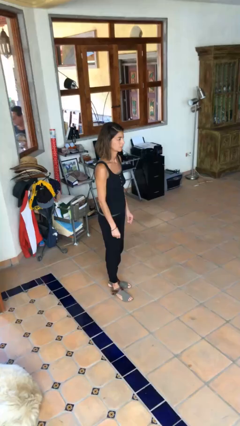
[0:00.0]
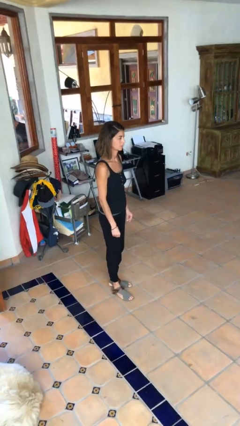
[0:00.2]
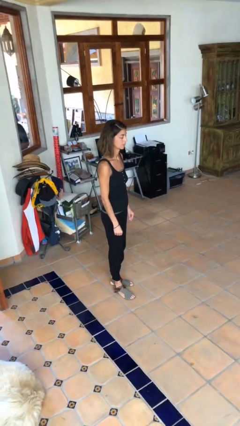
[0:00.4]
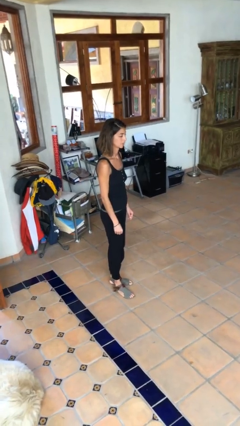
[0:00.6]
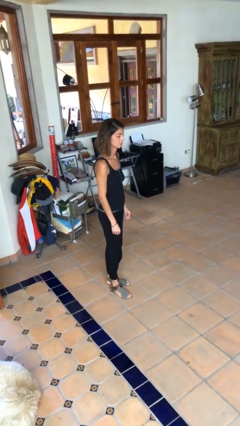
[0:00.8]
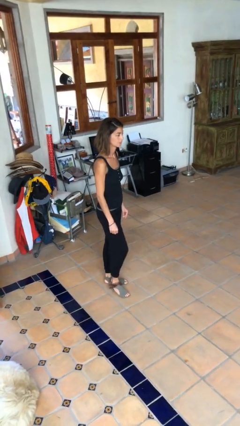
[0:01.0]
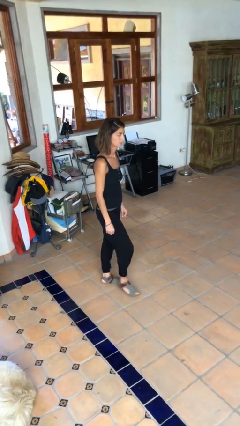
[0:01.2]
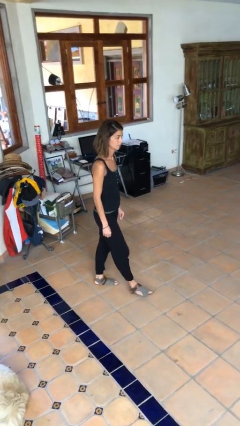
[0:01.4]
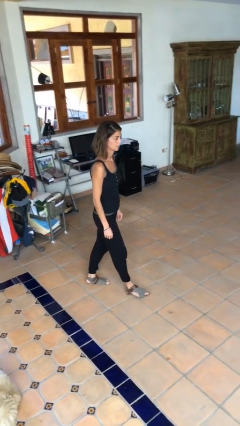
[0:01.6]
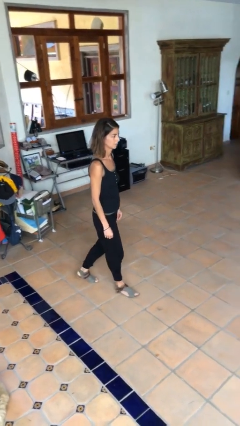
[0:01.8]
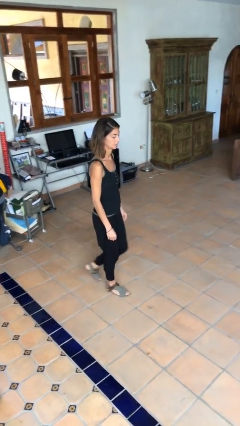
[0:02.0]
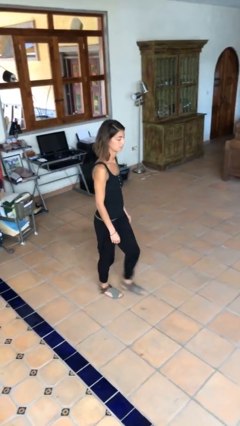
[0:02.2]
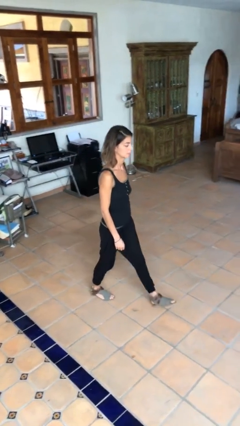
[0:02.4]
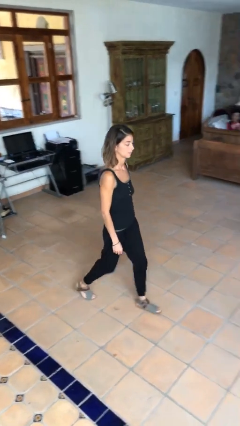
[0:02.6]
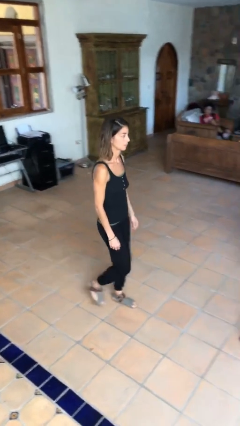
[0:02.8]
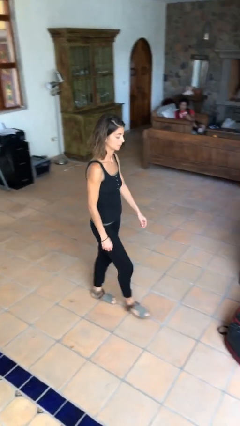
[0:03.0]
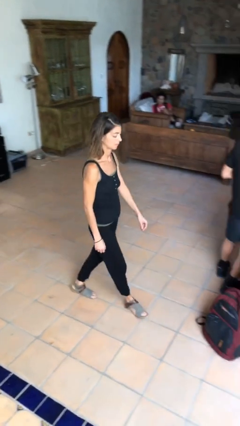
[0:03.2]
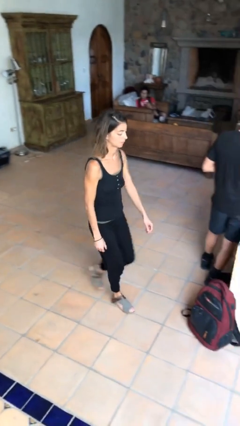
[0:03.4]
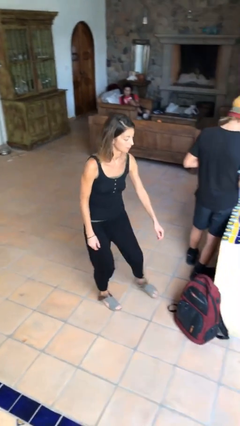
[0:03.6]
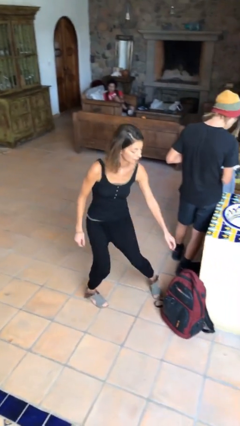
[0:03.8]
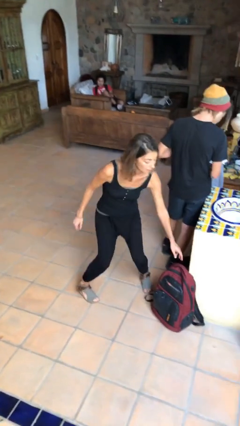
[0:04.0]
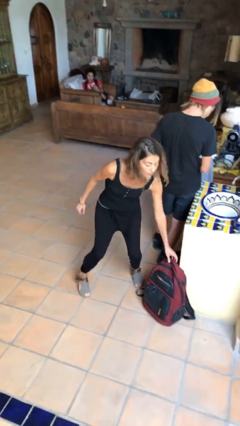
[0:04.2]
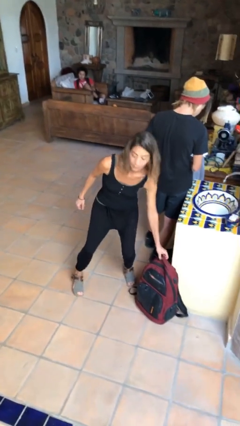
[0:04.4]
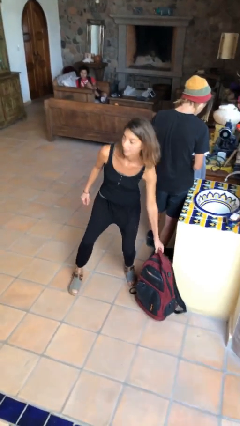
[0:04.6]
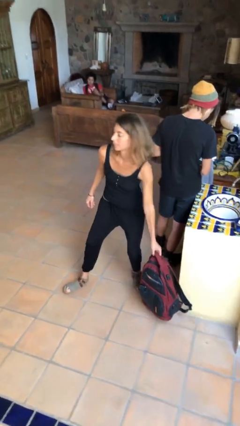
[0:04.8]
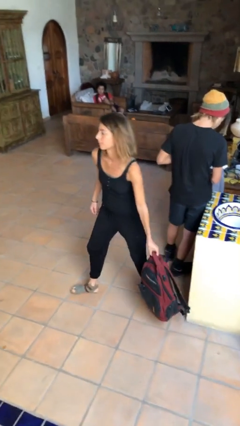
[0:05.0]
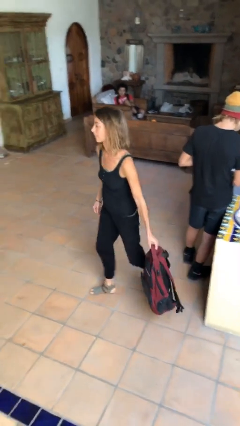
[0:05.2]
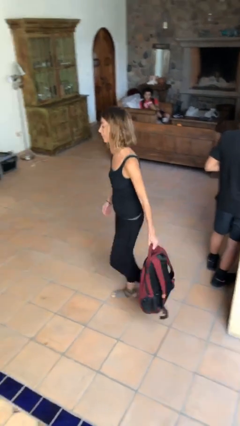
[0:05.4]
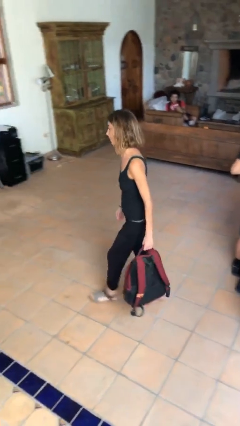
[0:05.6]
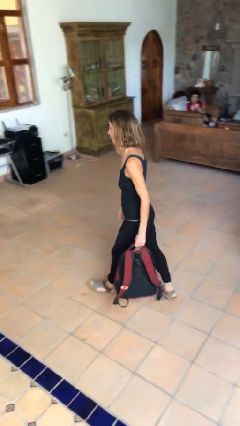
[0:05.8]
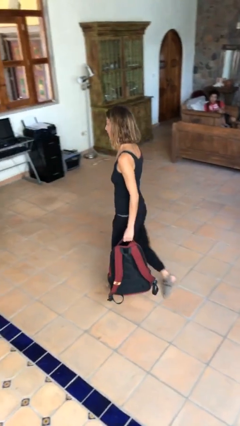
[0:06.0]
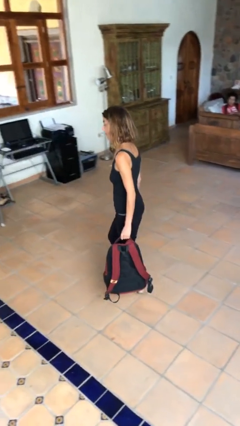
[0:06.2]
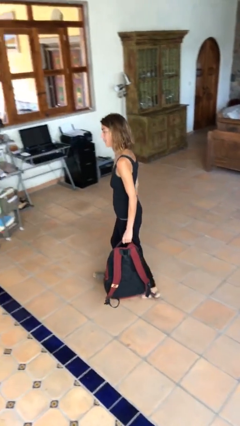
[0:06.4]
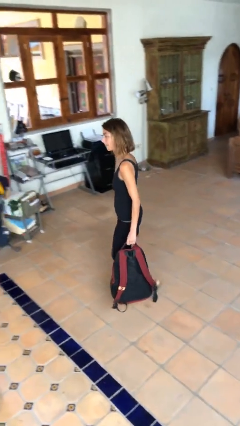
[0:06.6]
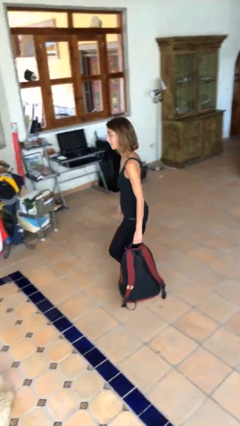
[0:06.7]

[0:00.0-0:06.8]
person steals object from person

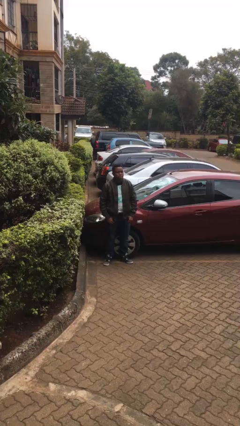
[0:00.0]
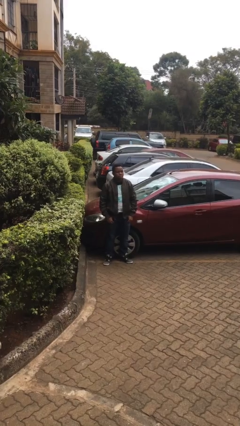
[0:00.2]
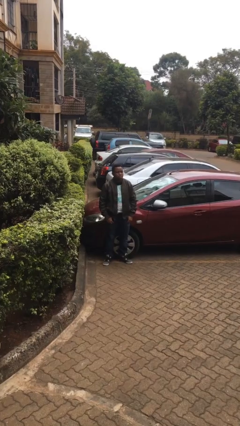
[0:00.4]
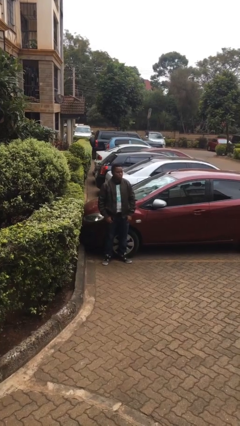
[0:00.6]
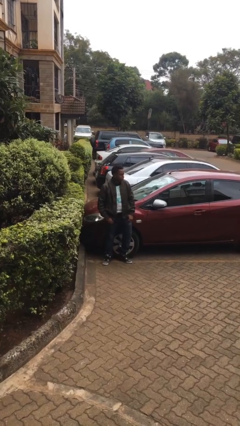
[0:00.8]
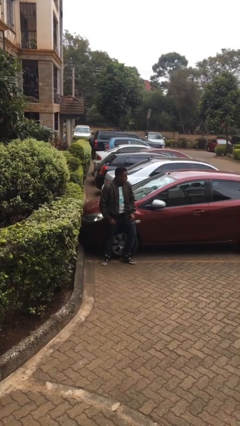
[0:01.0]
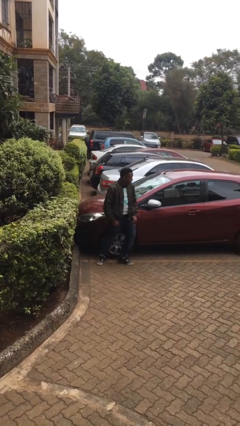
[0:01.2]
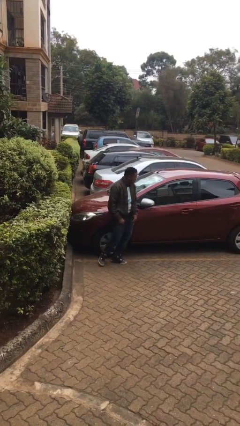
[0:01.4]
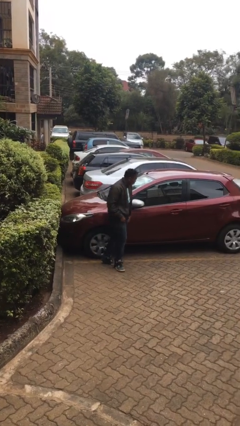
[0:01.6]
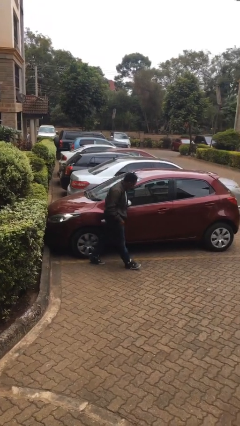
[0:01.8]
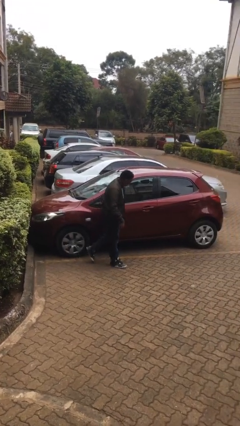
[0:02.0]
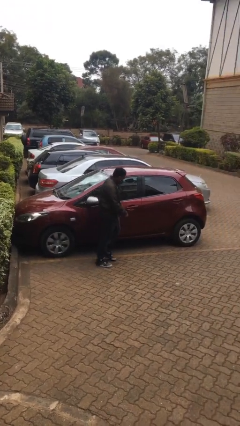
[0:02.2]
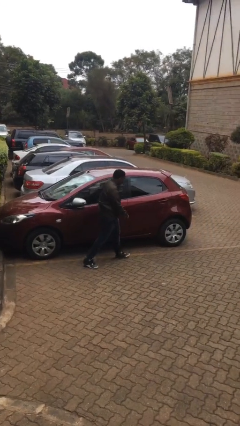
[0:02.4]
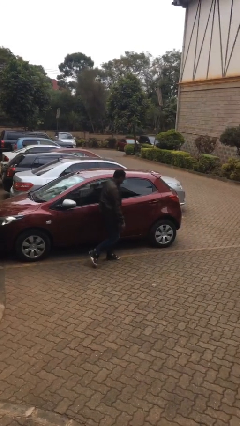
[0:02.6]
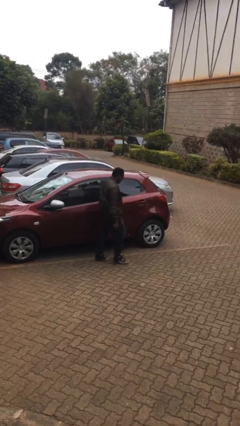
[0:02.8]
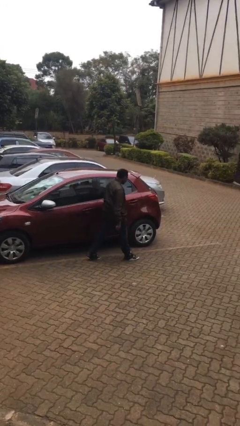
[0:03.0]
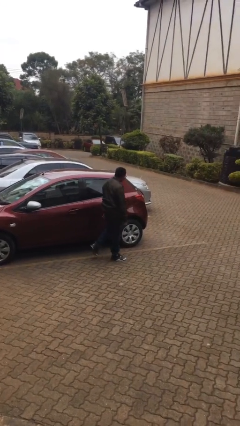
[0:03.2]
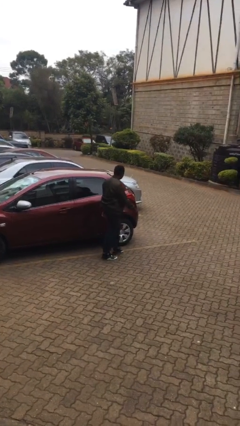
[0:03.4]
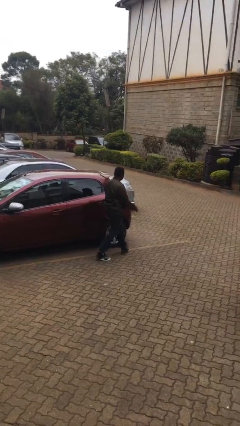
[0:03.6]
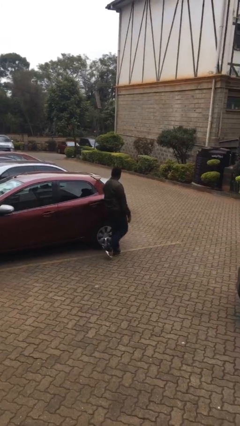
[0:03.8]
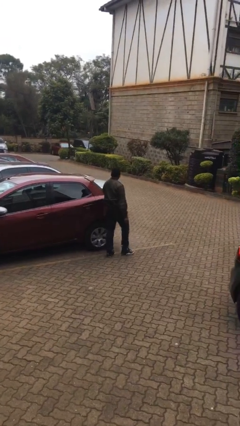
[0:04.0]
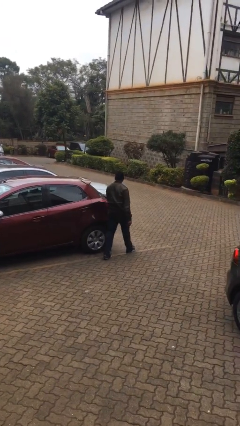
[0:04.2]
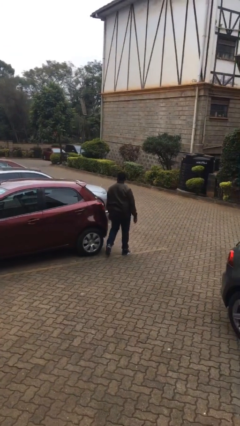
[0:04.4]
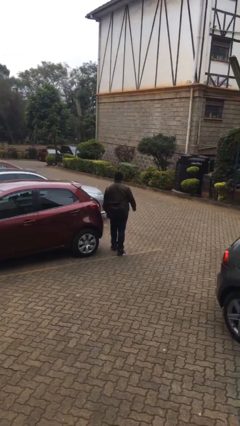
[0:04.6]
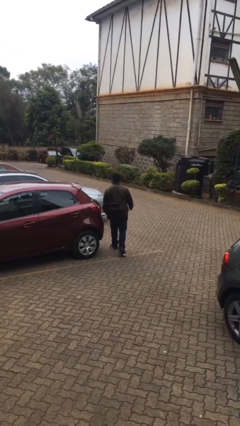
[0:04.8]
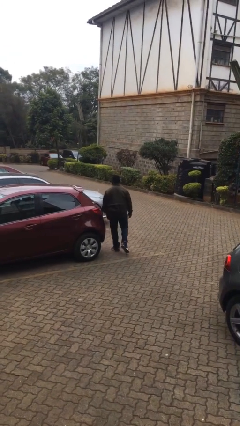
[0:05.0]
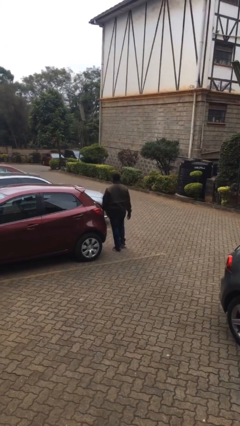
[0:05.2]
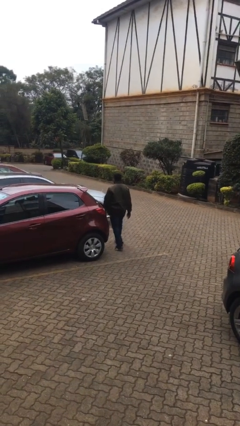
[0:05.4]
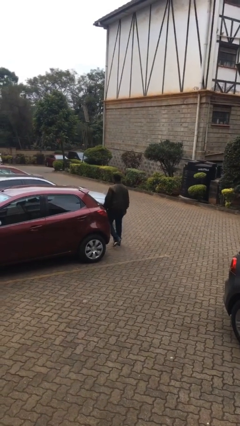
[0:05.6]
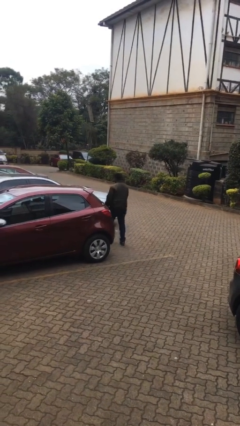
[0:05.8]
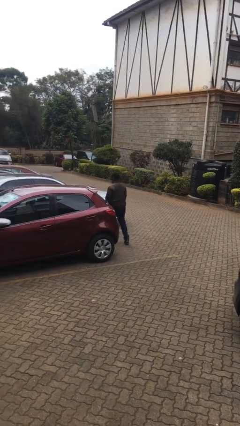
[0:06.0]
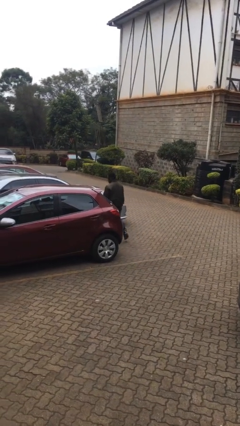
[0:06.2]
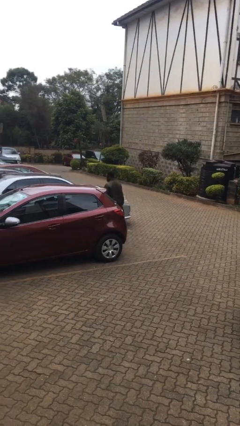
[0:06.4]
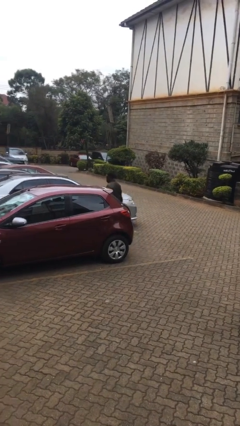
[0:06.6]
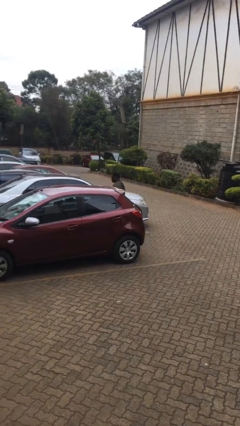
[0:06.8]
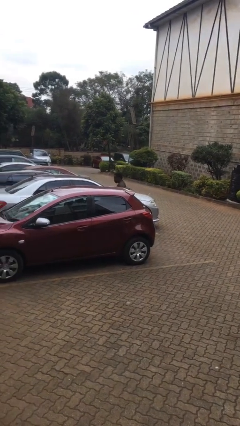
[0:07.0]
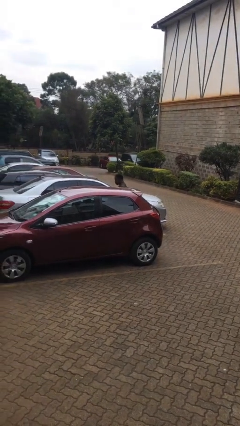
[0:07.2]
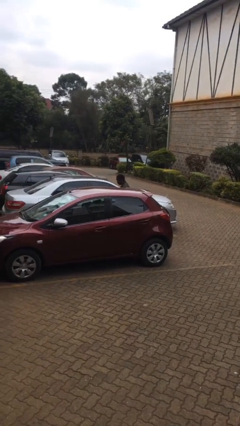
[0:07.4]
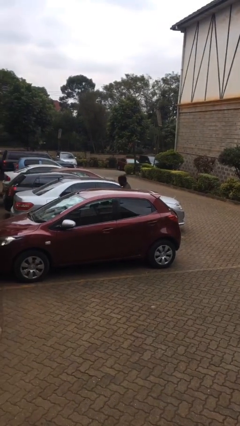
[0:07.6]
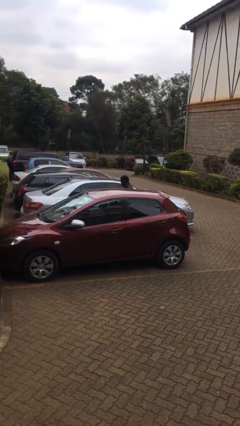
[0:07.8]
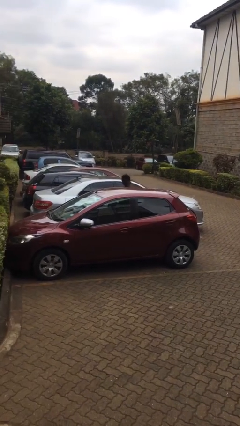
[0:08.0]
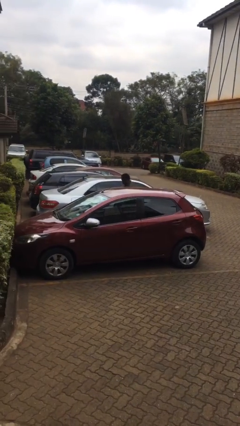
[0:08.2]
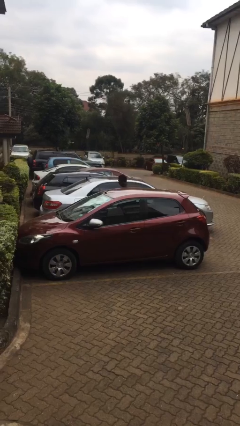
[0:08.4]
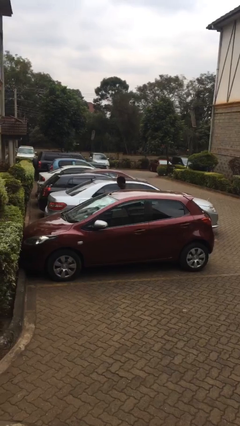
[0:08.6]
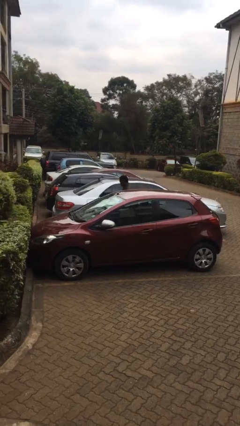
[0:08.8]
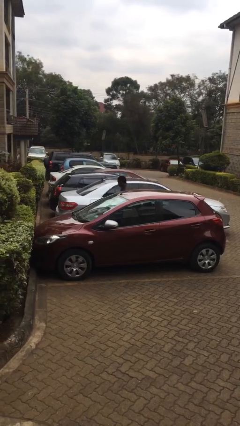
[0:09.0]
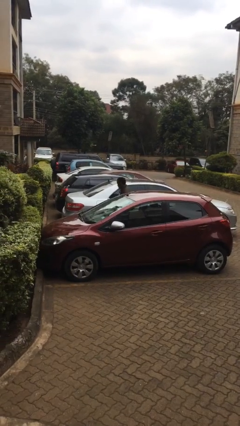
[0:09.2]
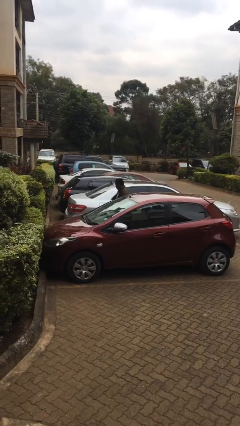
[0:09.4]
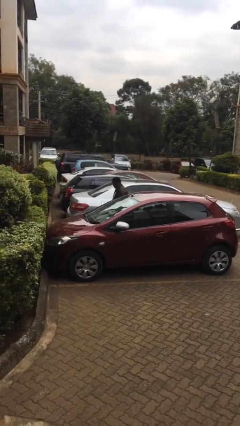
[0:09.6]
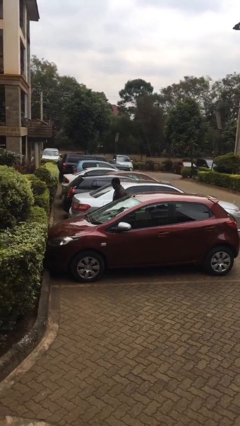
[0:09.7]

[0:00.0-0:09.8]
person walks around car

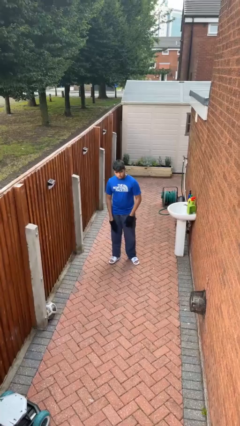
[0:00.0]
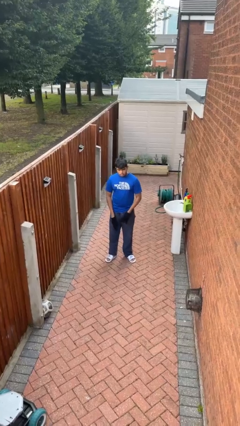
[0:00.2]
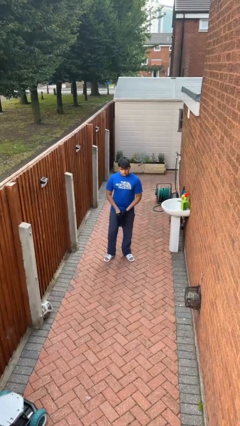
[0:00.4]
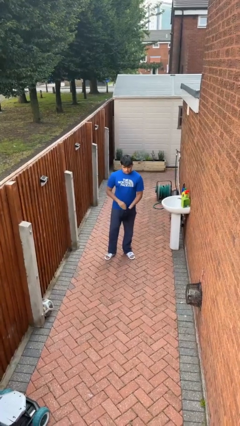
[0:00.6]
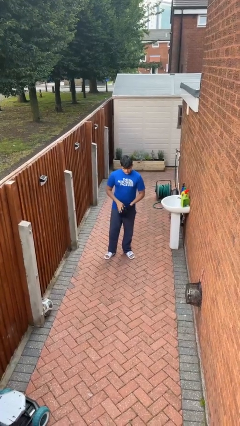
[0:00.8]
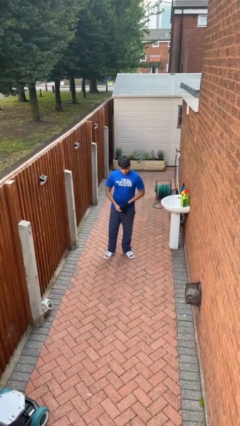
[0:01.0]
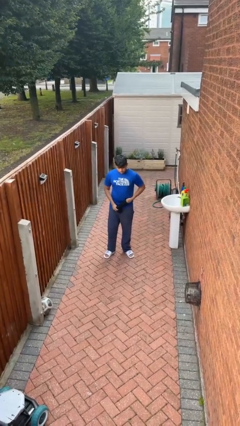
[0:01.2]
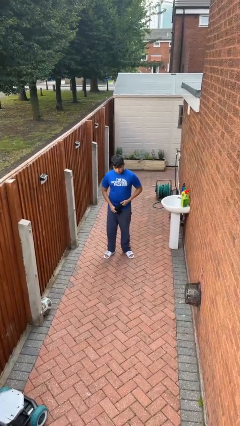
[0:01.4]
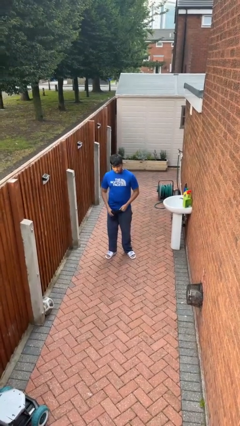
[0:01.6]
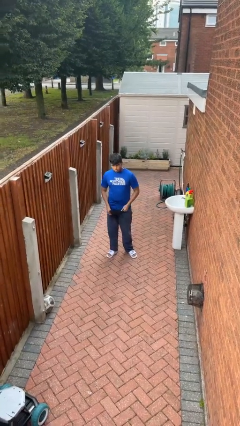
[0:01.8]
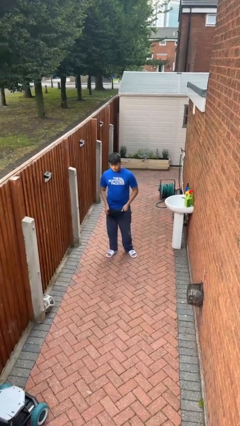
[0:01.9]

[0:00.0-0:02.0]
person takes off gloves
